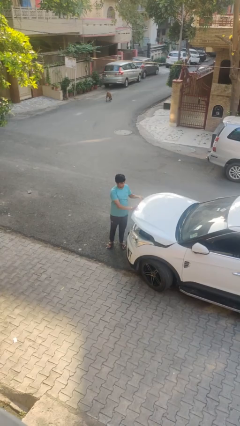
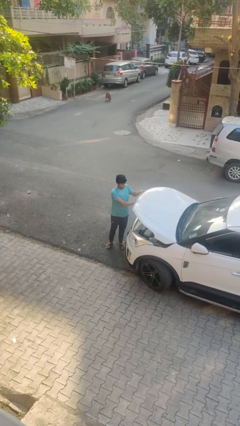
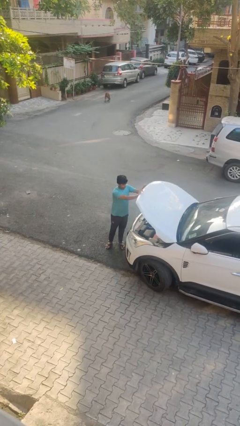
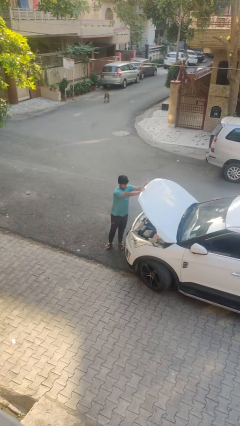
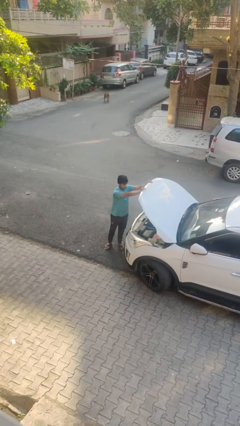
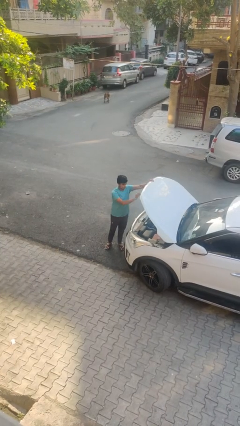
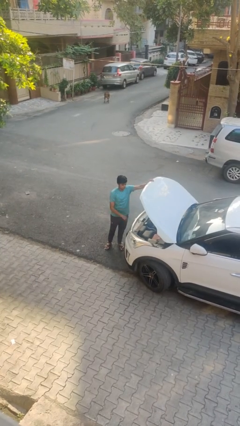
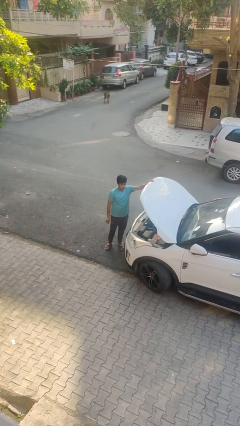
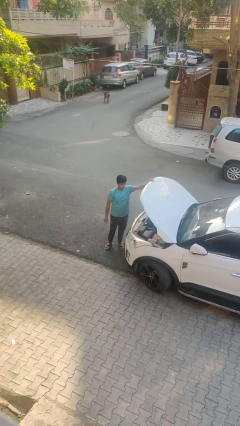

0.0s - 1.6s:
person opens car hood

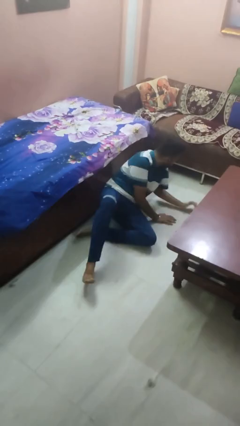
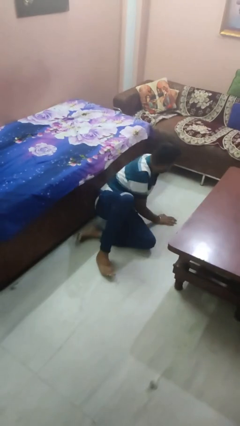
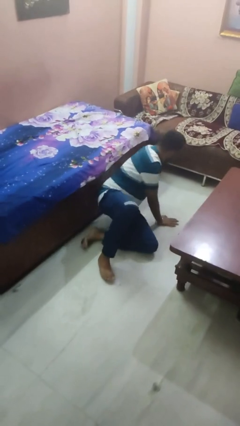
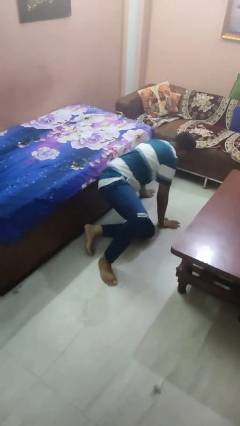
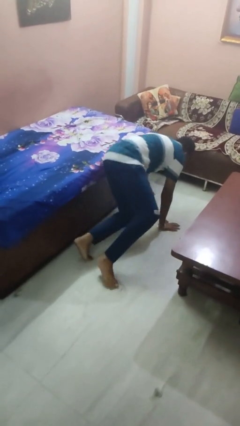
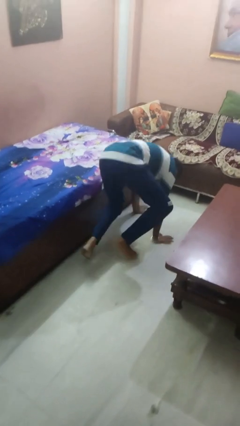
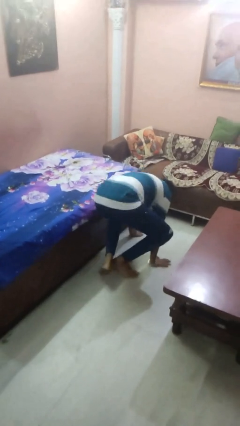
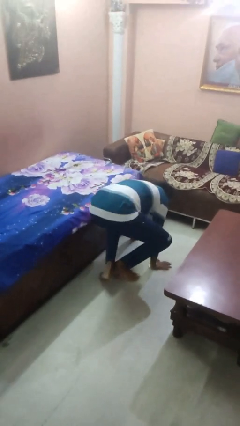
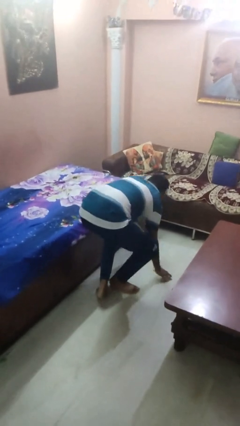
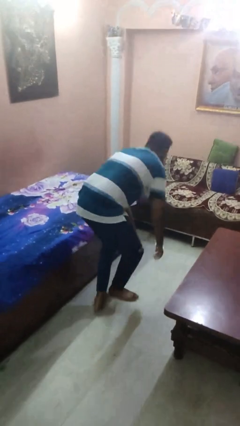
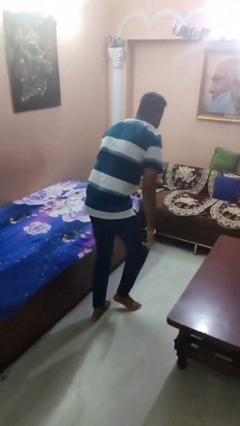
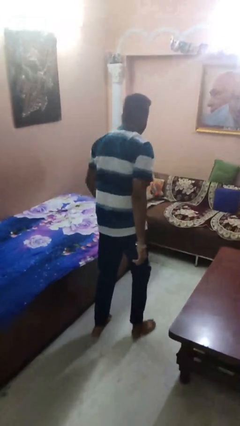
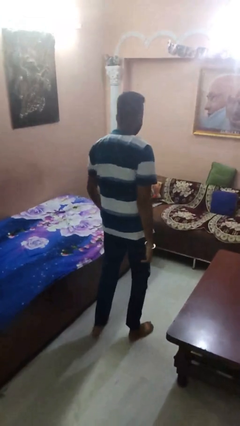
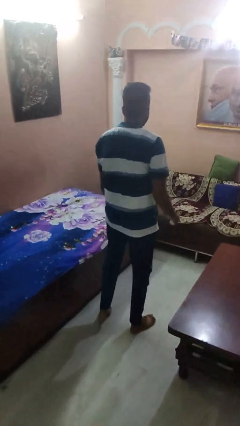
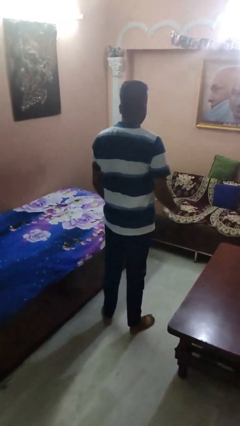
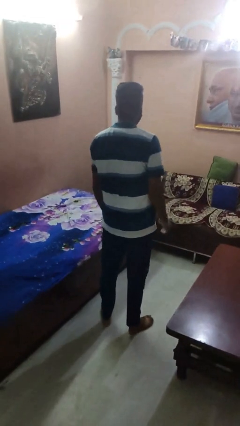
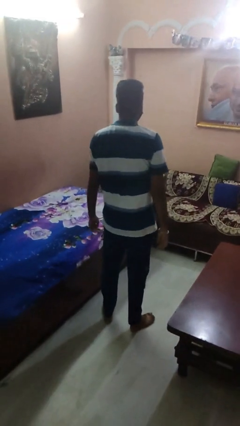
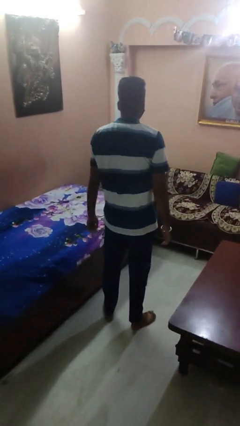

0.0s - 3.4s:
person stands up from floor

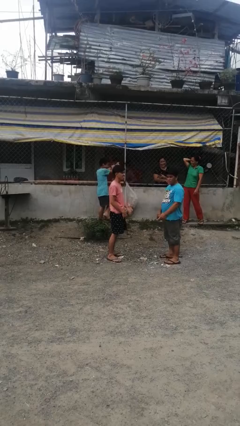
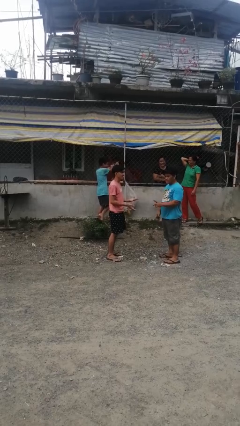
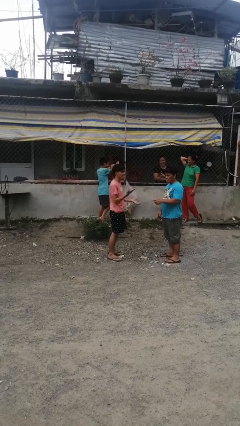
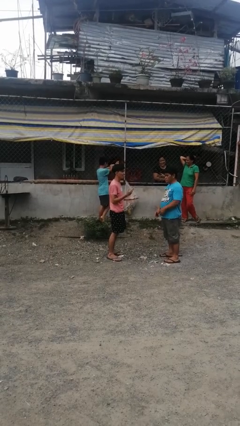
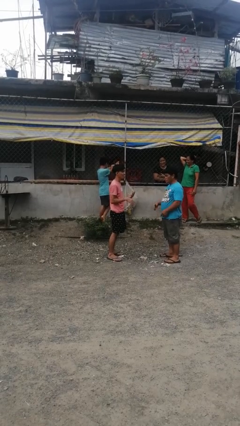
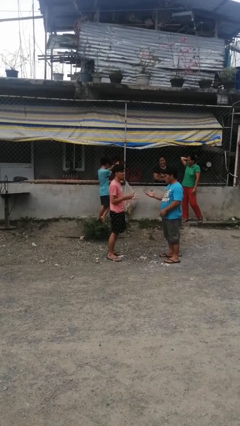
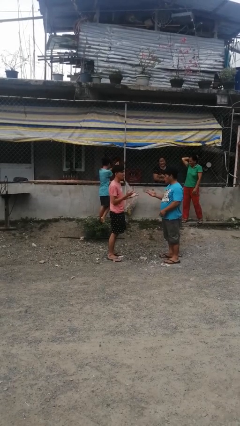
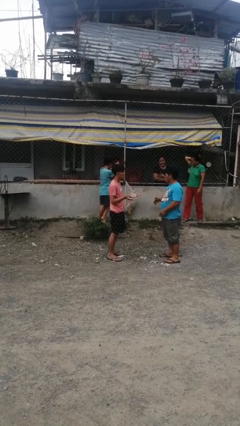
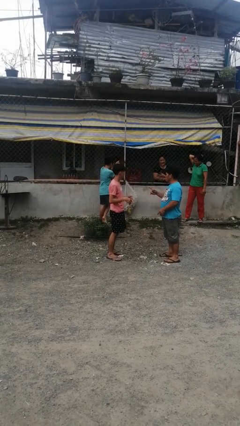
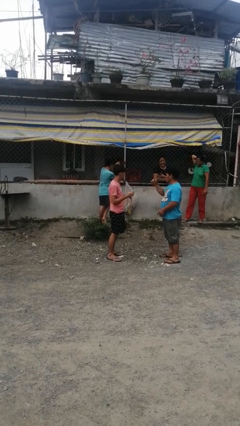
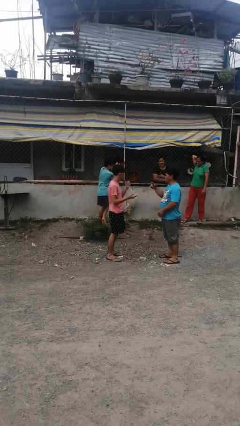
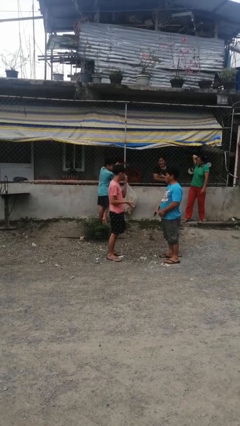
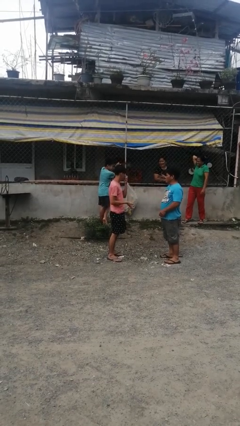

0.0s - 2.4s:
person talks to person

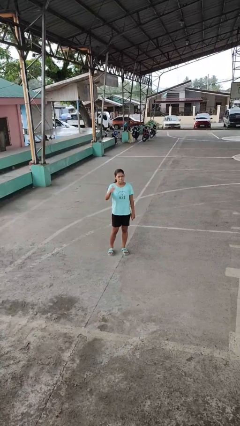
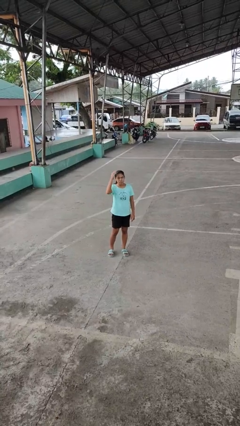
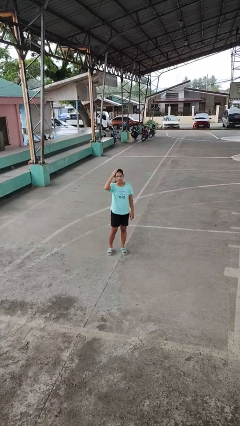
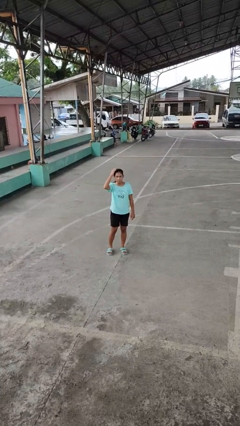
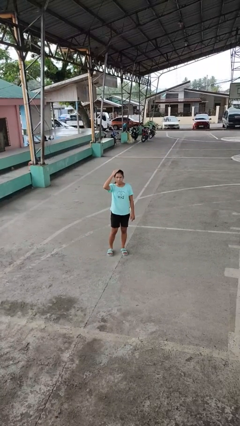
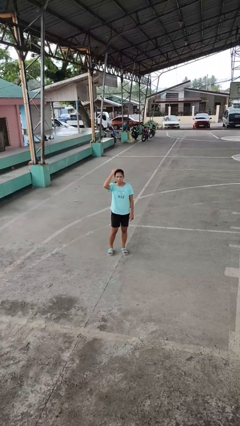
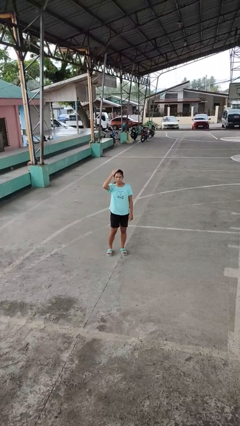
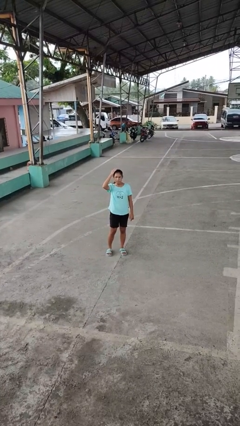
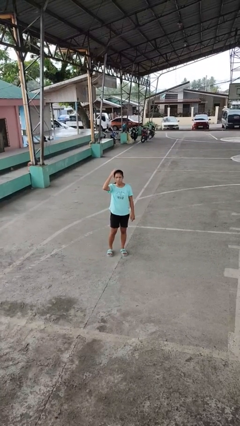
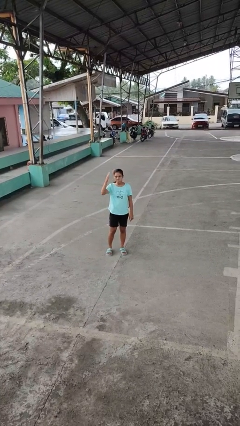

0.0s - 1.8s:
person pats head

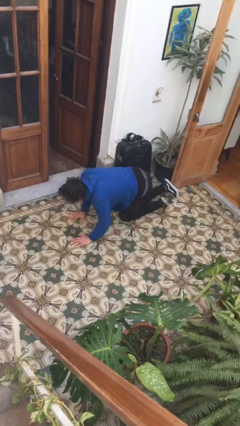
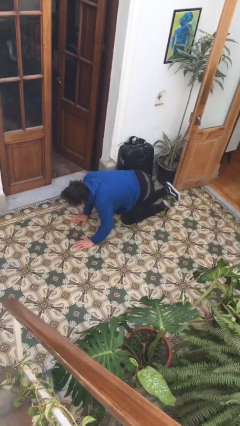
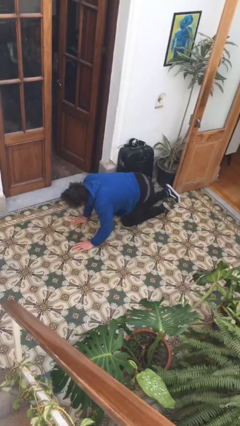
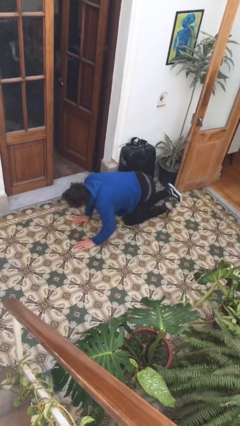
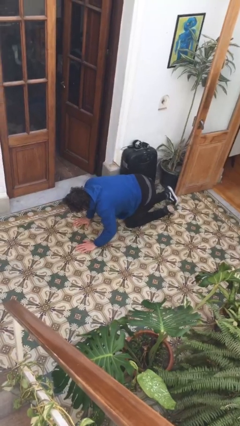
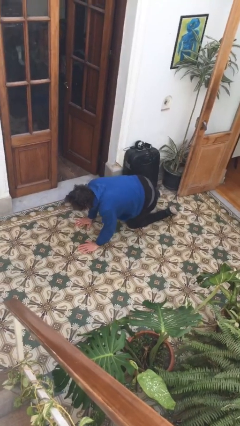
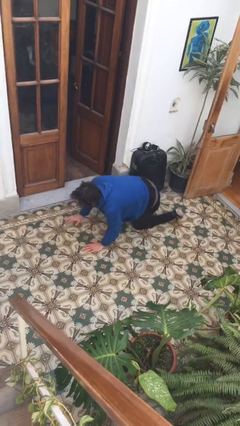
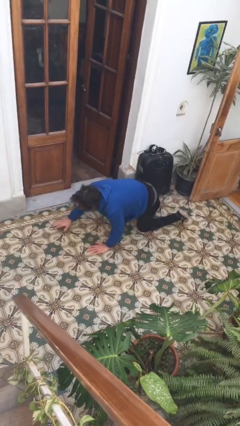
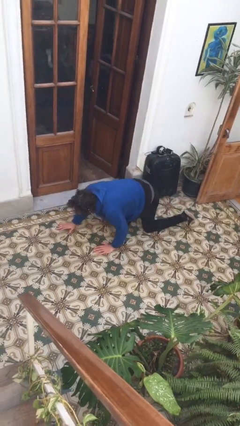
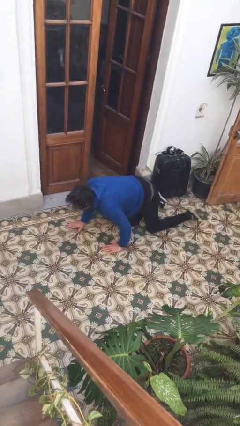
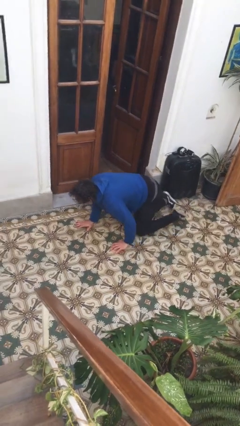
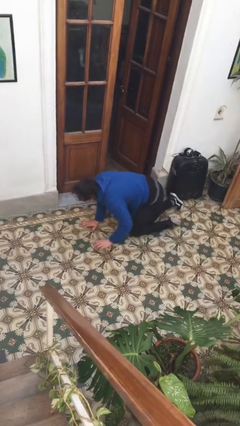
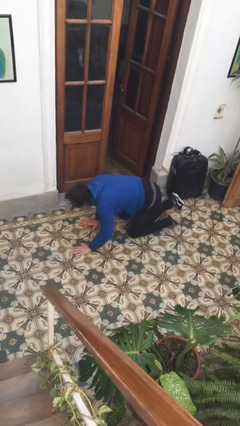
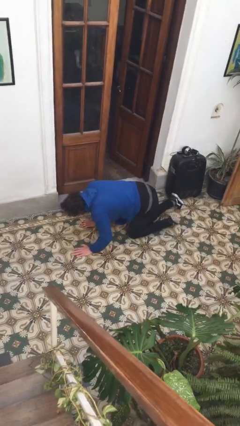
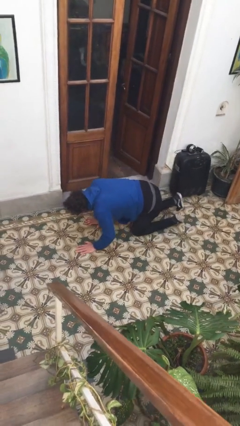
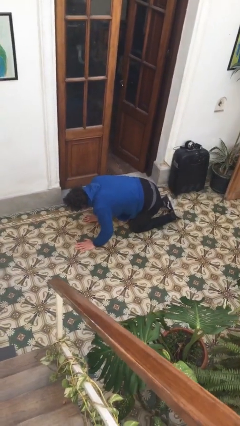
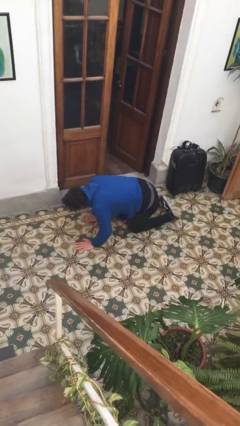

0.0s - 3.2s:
person crawls

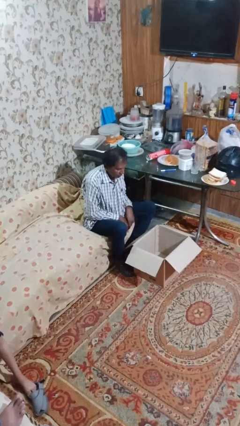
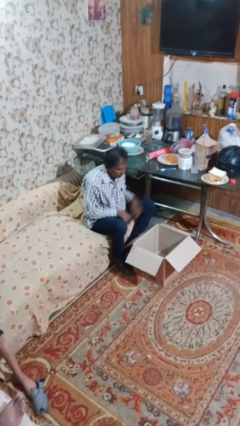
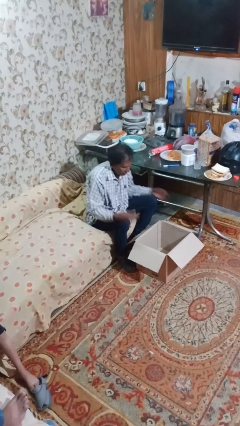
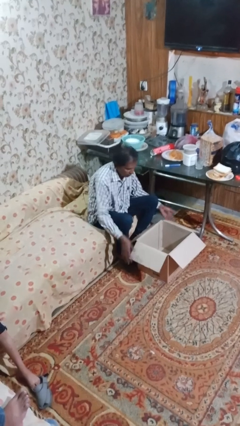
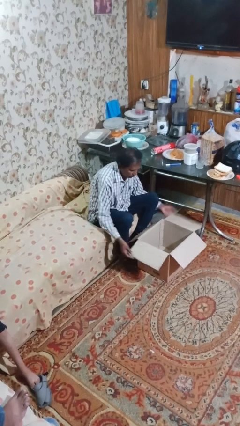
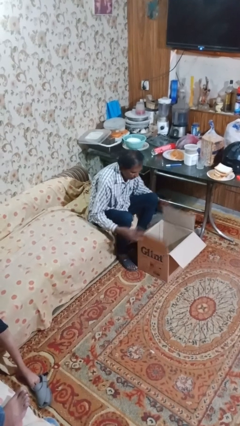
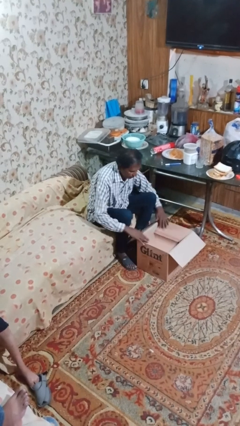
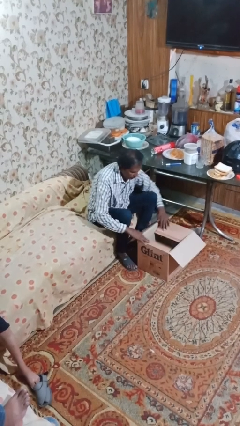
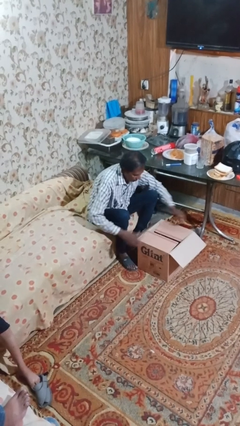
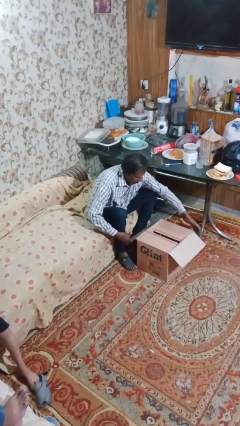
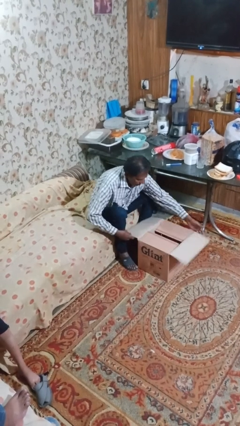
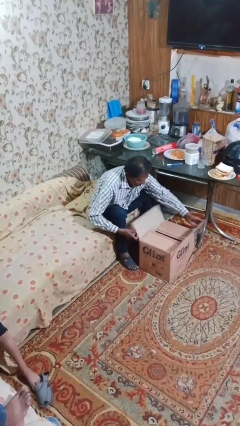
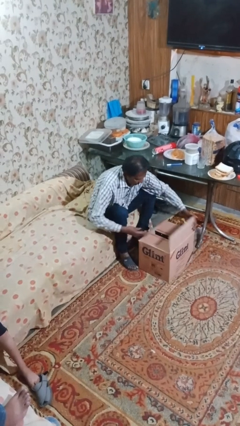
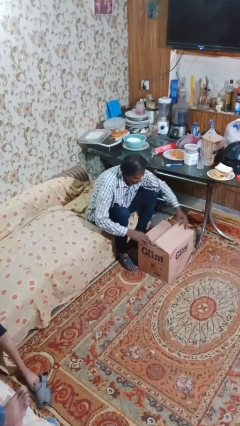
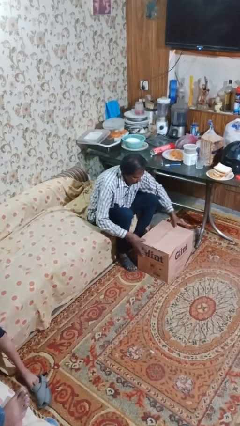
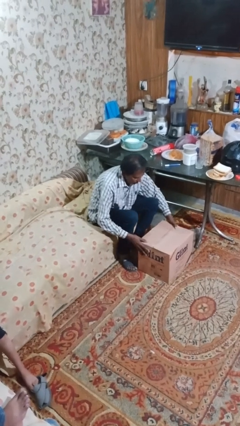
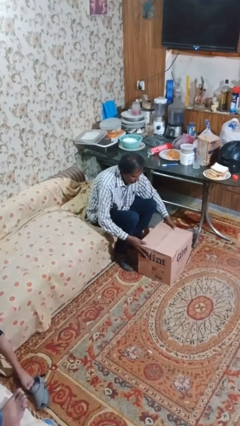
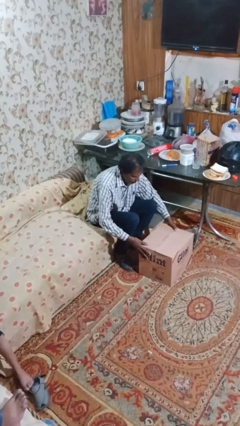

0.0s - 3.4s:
person closes box

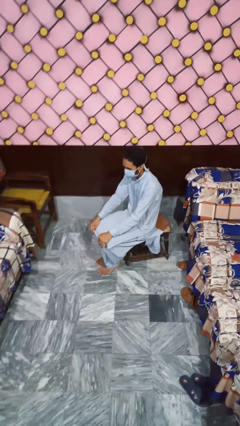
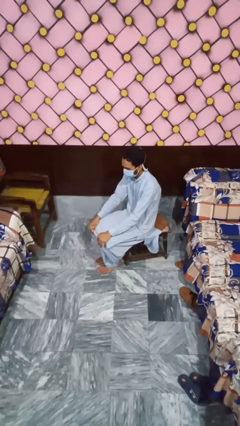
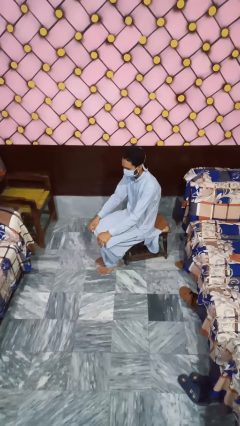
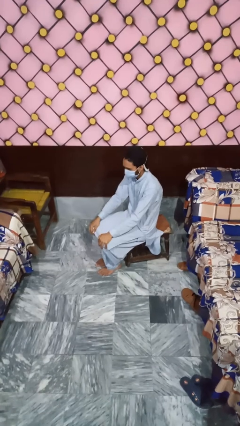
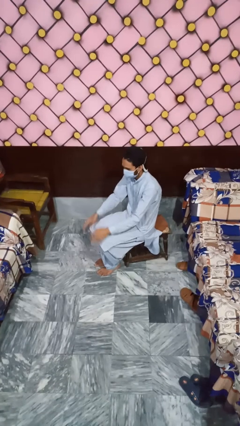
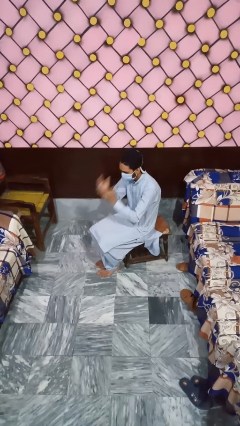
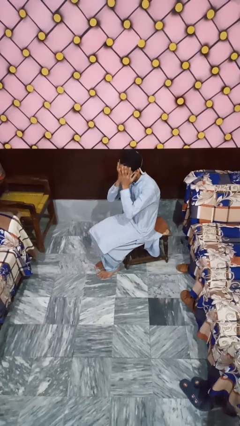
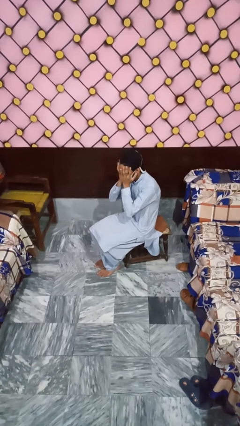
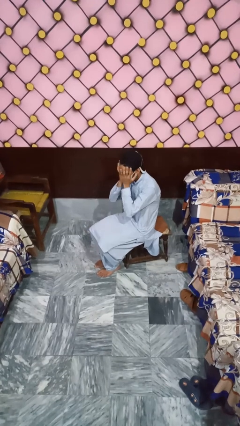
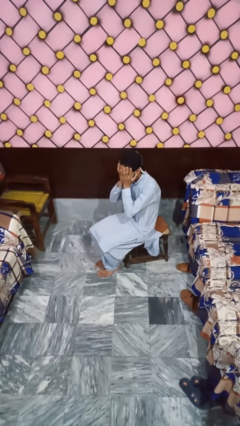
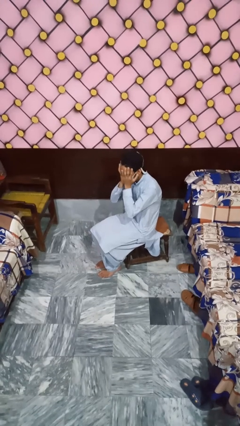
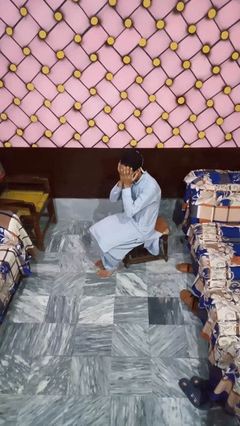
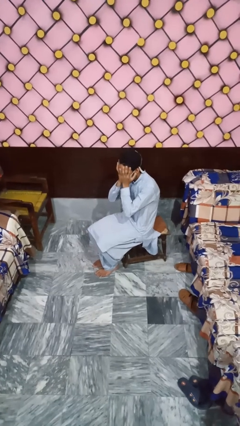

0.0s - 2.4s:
person covers face with hands
